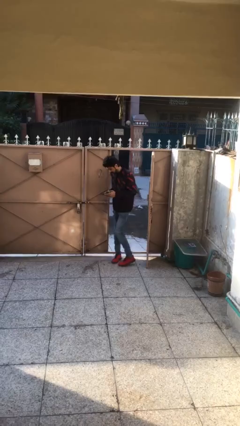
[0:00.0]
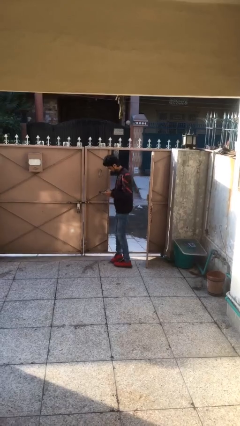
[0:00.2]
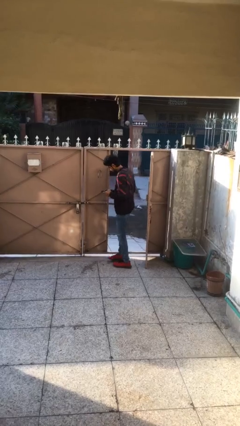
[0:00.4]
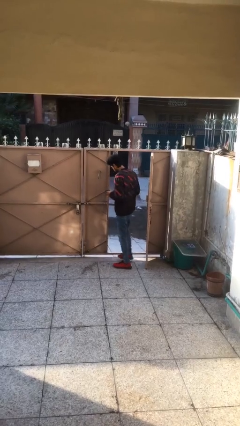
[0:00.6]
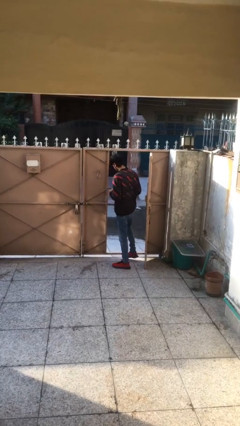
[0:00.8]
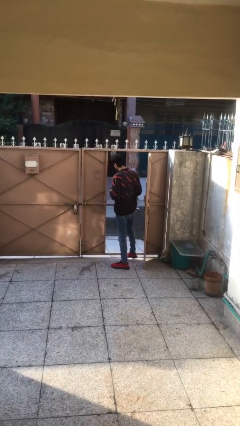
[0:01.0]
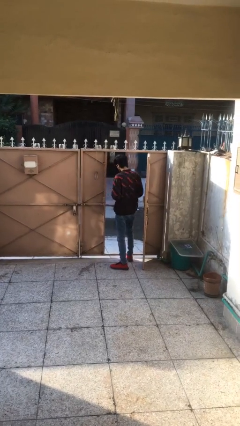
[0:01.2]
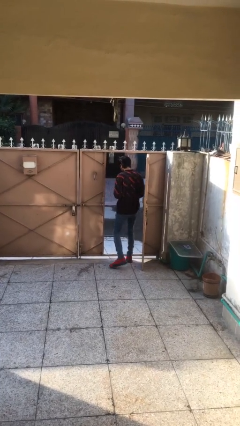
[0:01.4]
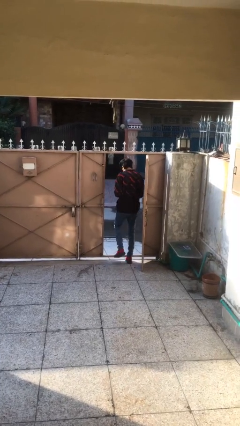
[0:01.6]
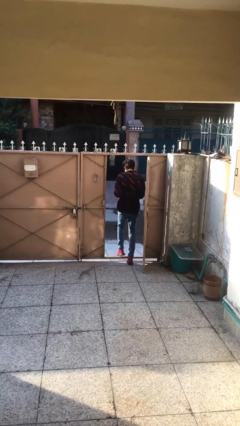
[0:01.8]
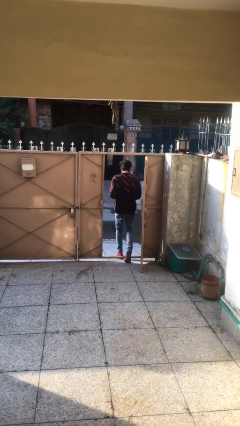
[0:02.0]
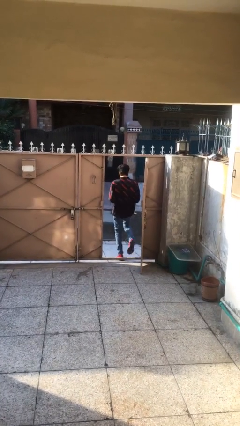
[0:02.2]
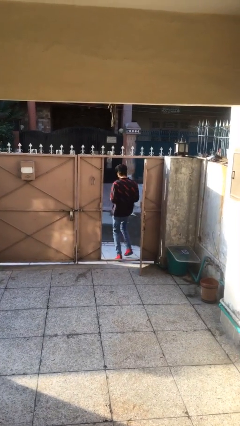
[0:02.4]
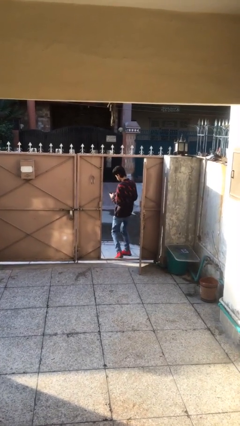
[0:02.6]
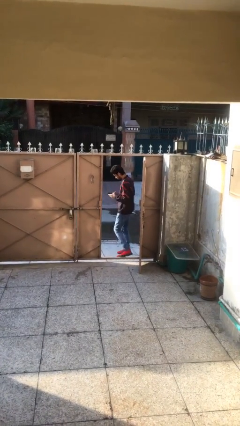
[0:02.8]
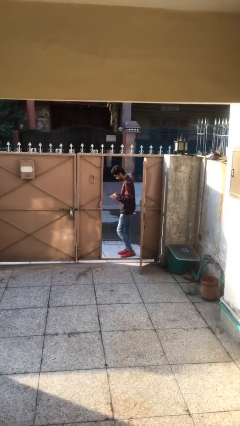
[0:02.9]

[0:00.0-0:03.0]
person exits scene through structure

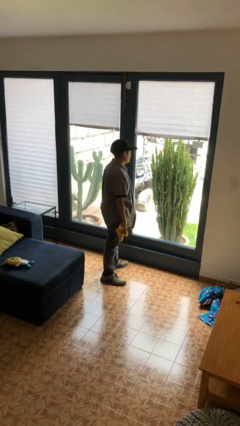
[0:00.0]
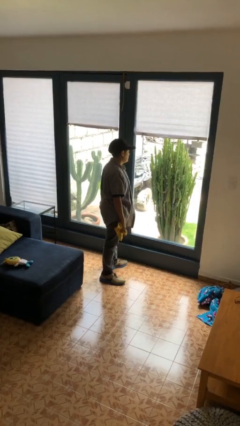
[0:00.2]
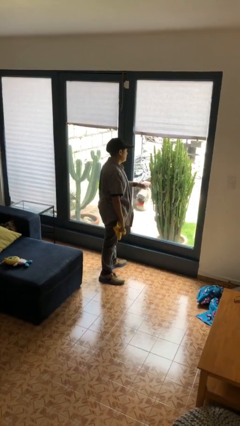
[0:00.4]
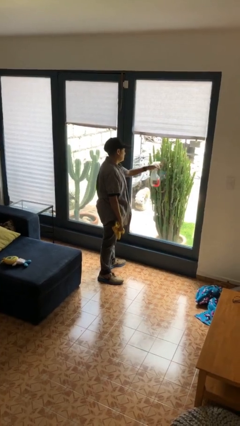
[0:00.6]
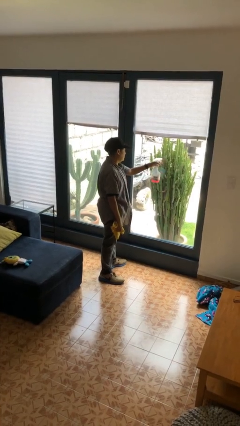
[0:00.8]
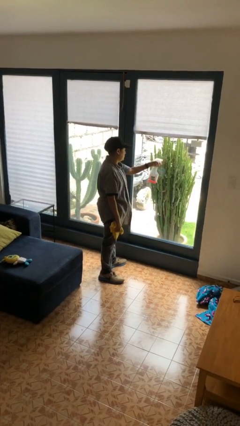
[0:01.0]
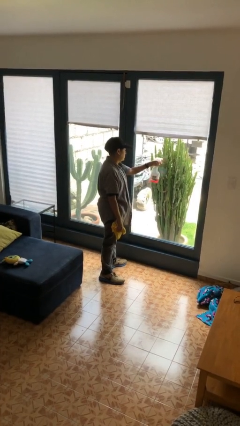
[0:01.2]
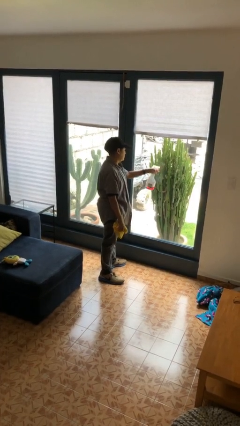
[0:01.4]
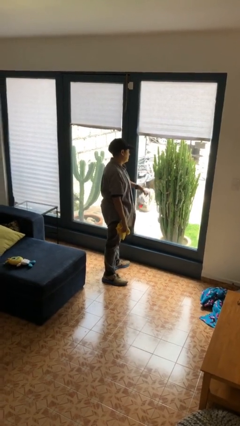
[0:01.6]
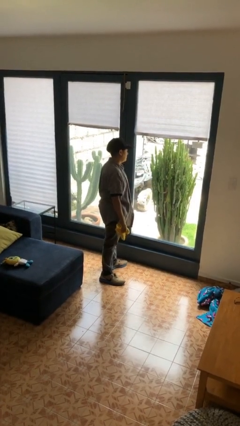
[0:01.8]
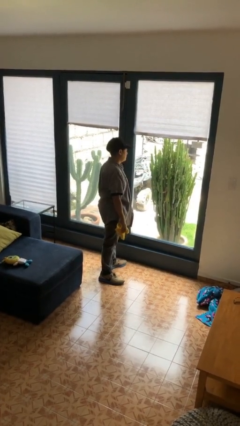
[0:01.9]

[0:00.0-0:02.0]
person sprays from bottle

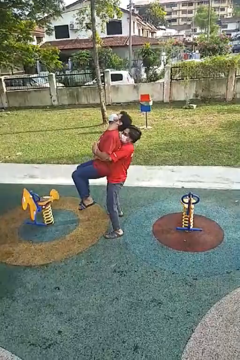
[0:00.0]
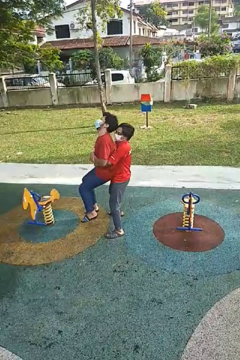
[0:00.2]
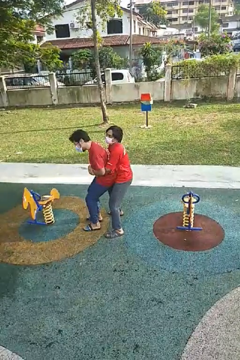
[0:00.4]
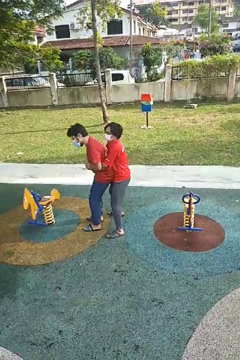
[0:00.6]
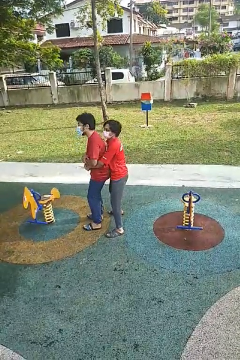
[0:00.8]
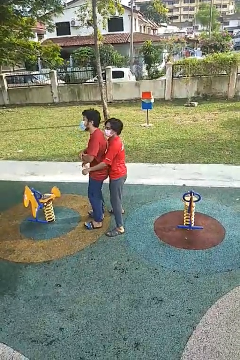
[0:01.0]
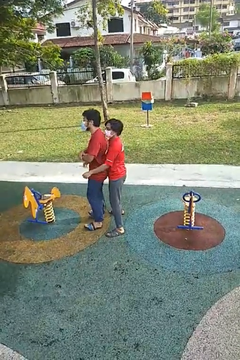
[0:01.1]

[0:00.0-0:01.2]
person puts down person

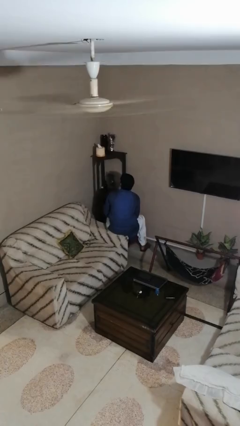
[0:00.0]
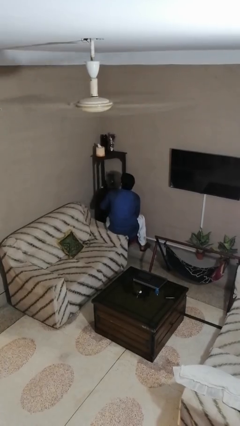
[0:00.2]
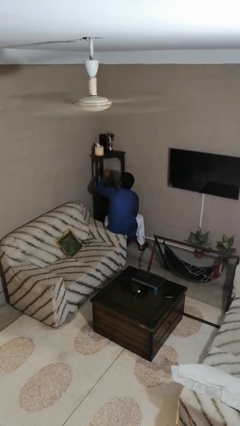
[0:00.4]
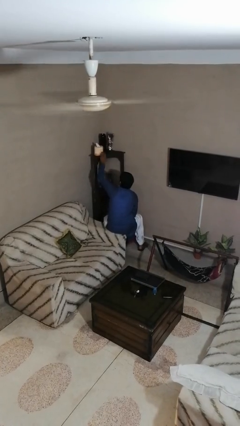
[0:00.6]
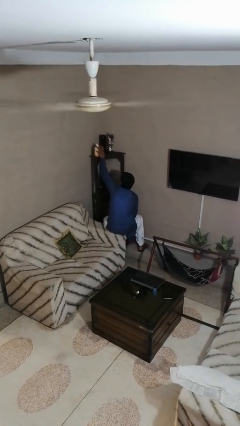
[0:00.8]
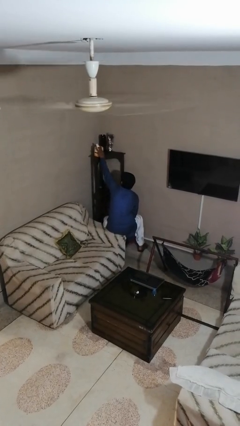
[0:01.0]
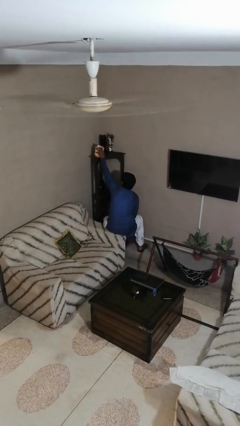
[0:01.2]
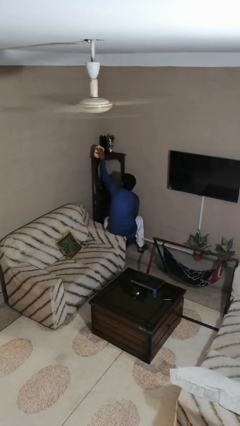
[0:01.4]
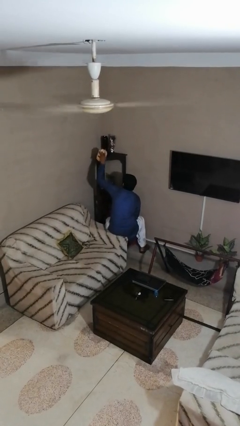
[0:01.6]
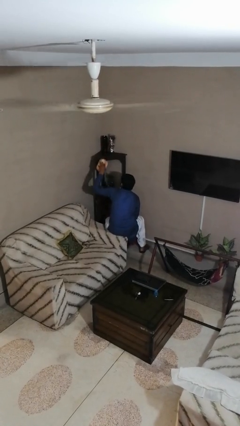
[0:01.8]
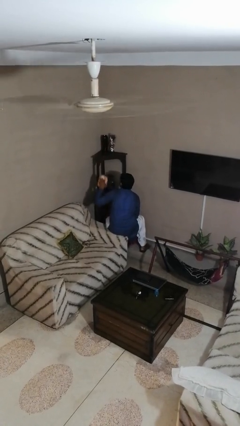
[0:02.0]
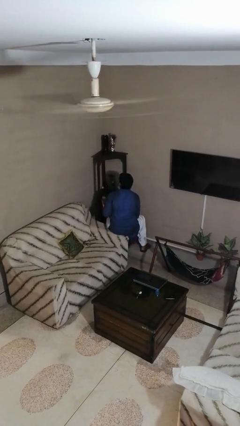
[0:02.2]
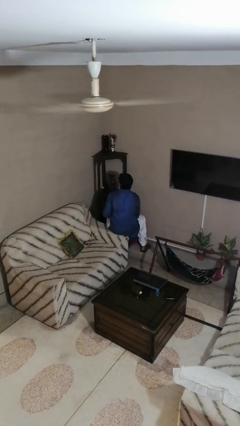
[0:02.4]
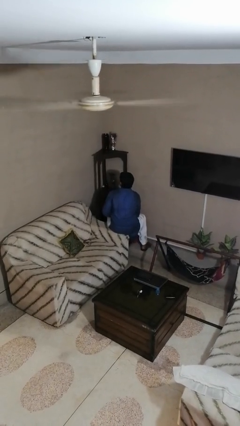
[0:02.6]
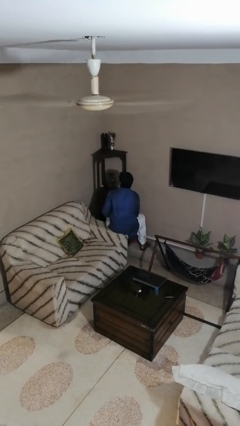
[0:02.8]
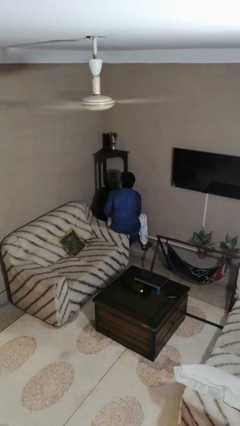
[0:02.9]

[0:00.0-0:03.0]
person picks up object from shelf

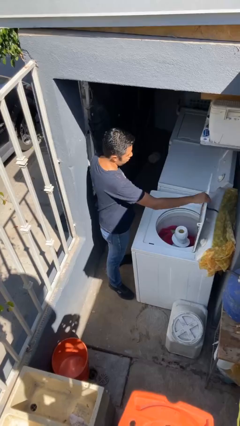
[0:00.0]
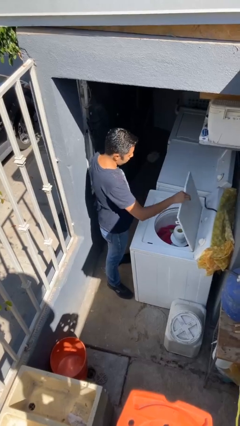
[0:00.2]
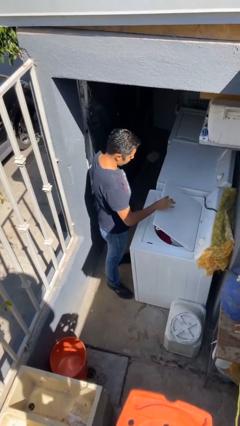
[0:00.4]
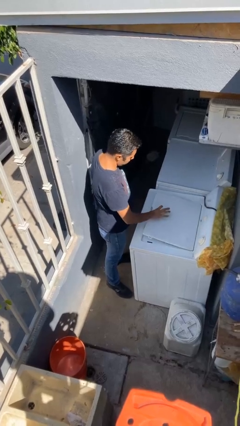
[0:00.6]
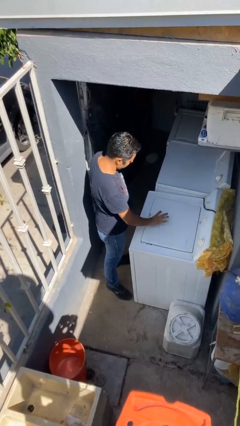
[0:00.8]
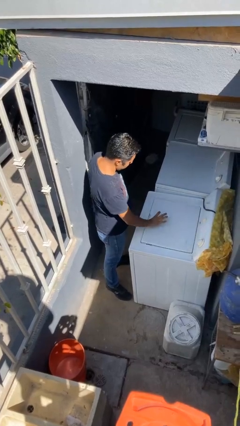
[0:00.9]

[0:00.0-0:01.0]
person closes clothes washer

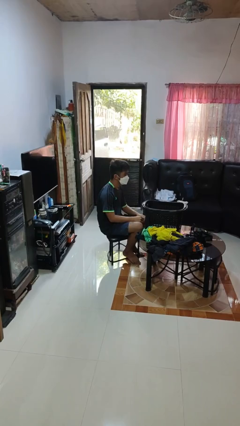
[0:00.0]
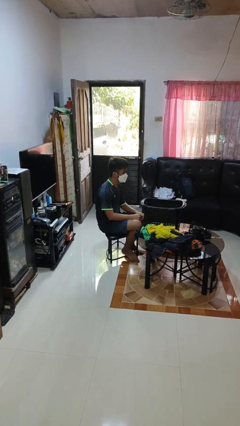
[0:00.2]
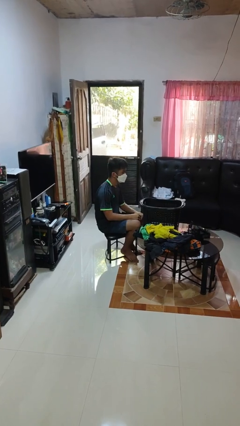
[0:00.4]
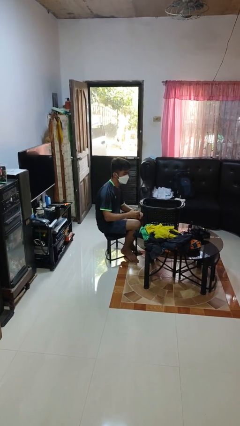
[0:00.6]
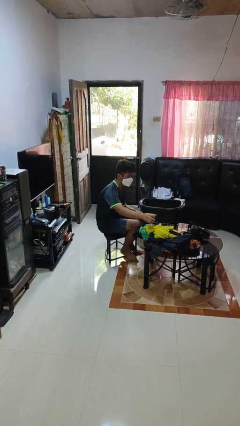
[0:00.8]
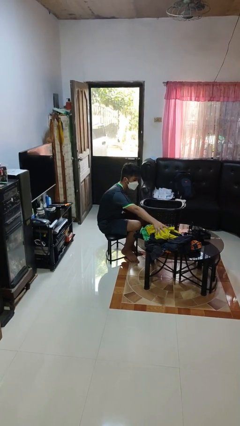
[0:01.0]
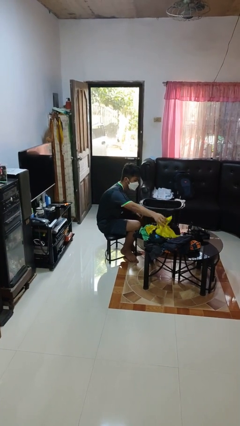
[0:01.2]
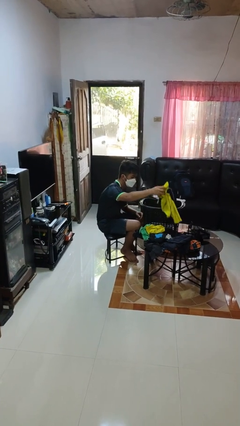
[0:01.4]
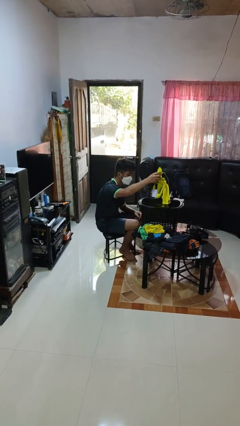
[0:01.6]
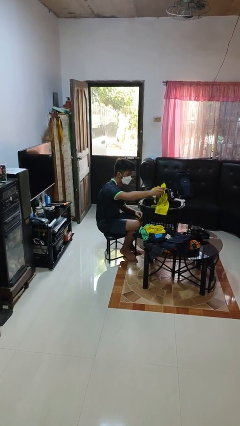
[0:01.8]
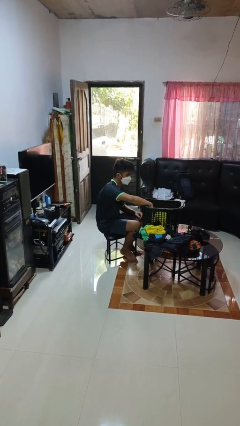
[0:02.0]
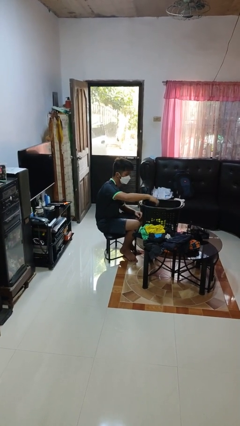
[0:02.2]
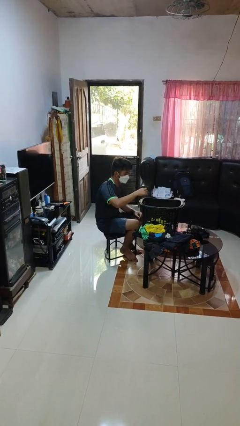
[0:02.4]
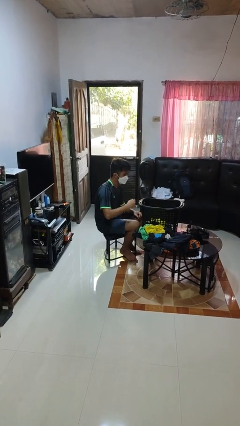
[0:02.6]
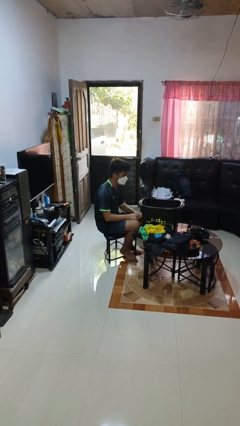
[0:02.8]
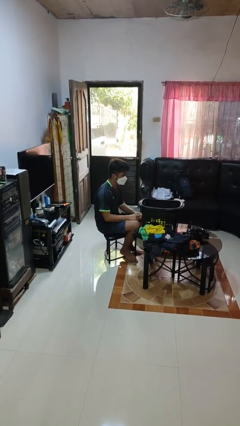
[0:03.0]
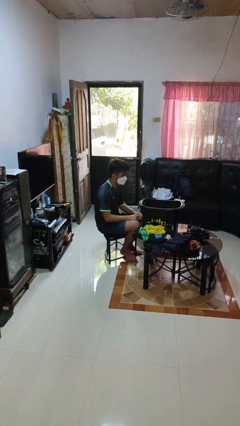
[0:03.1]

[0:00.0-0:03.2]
person puts object into basket

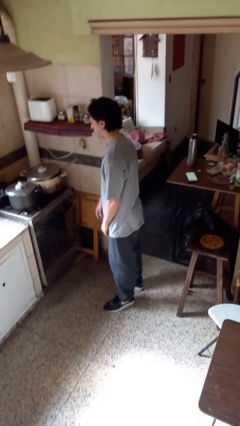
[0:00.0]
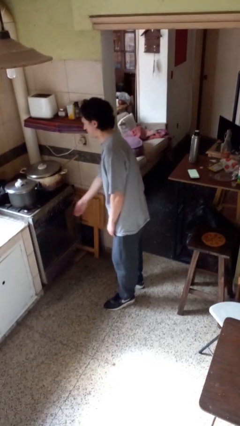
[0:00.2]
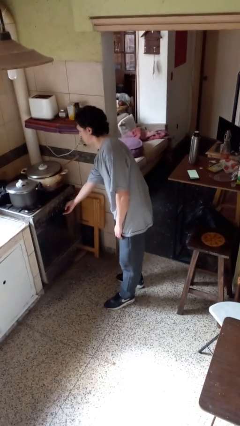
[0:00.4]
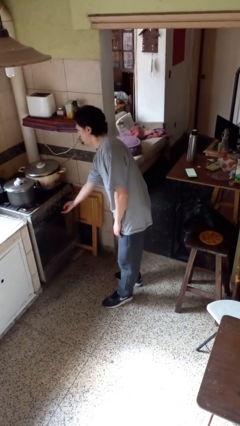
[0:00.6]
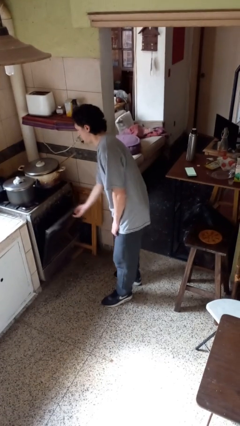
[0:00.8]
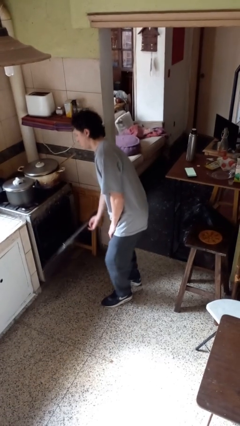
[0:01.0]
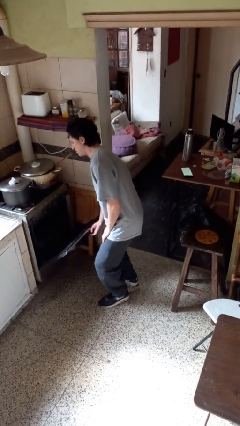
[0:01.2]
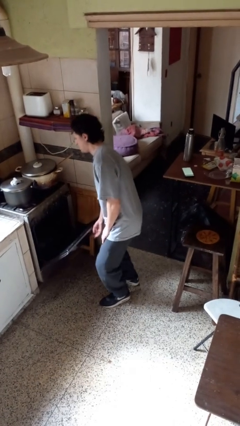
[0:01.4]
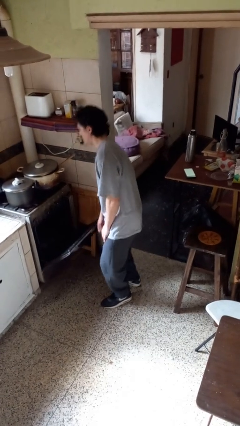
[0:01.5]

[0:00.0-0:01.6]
person opens oven door

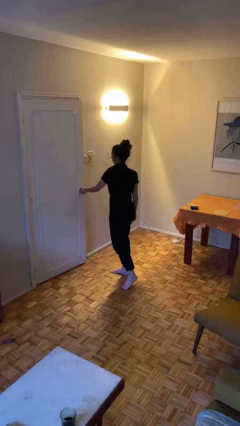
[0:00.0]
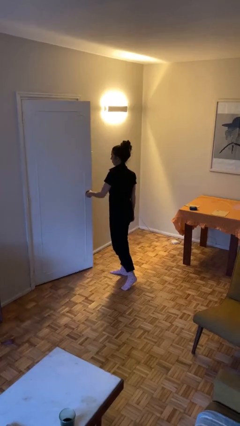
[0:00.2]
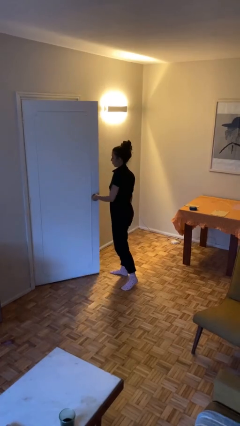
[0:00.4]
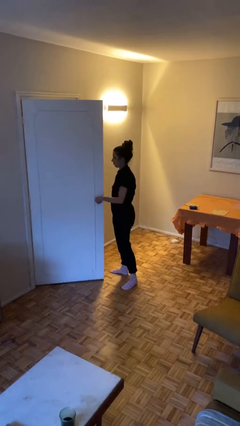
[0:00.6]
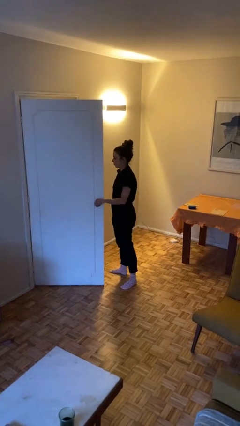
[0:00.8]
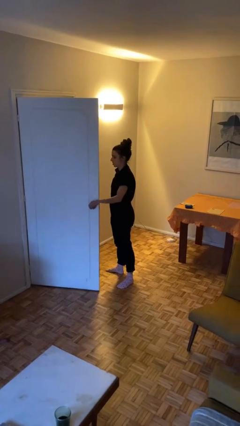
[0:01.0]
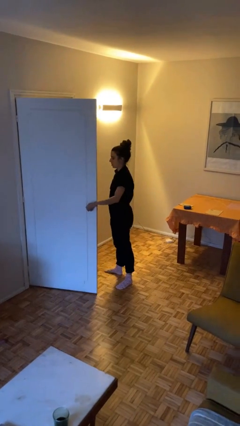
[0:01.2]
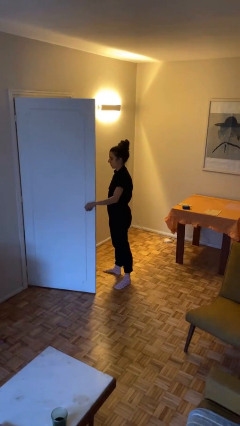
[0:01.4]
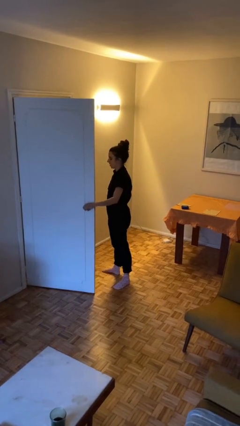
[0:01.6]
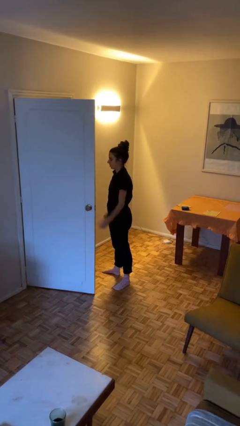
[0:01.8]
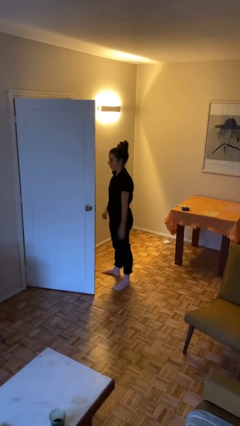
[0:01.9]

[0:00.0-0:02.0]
person opens facility door
